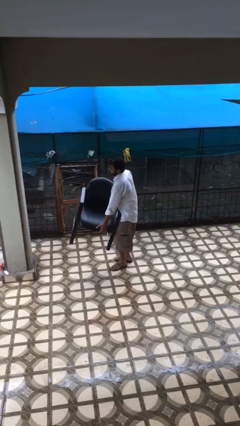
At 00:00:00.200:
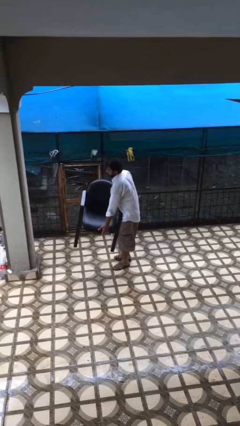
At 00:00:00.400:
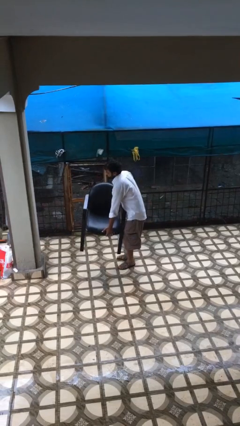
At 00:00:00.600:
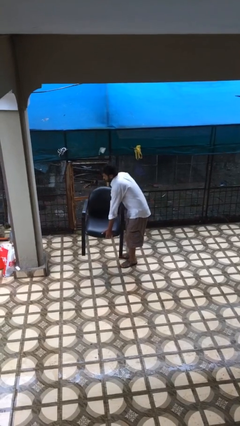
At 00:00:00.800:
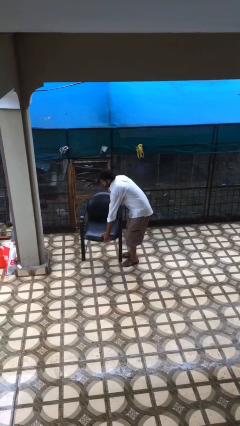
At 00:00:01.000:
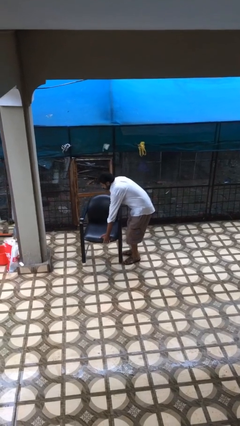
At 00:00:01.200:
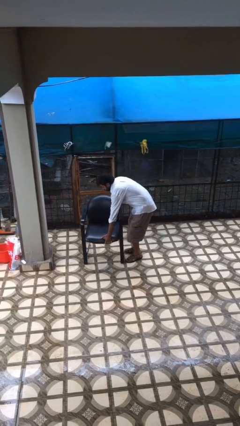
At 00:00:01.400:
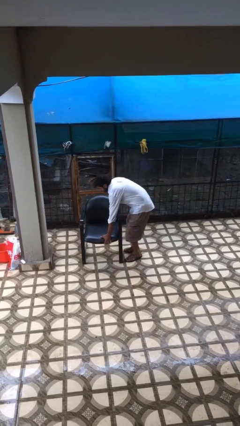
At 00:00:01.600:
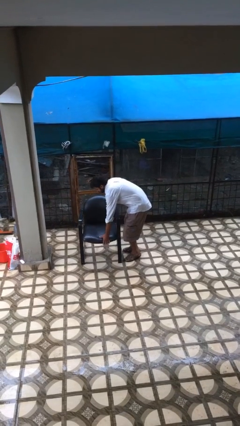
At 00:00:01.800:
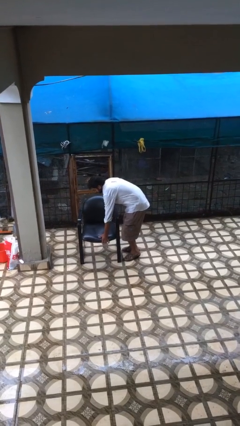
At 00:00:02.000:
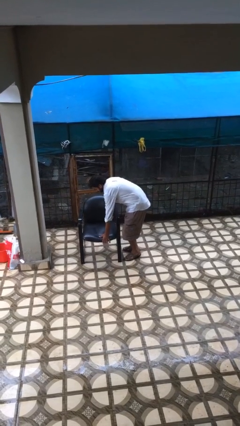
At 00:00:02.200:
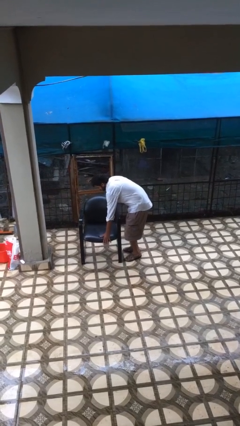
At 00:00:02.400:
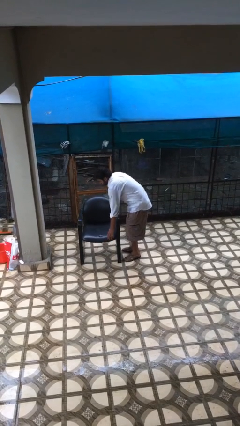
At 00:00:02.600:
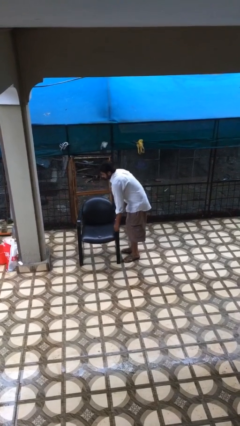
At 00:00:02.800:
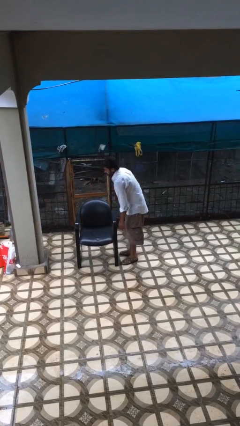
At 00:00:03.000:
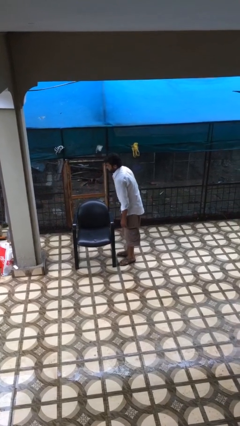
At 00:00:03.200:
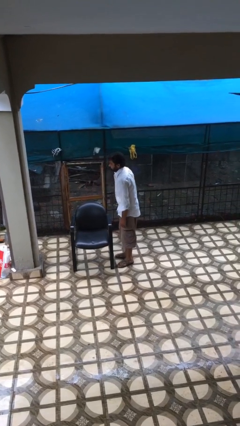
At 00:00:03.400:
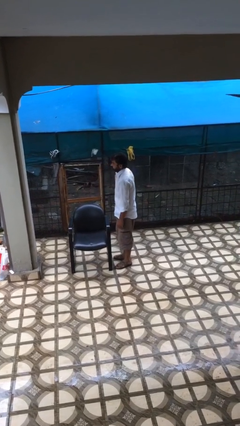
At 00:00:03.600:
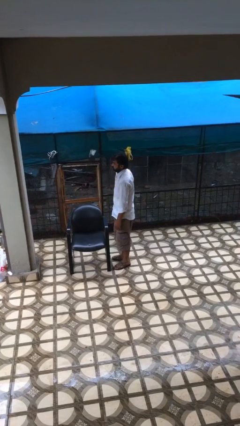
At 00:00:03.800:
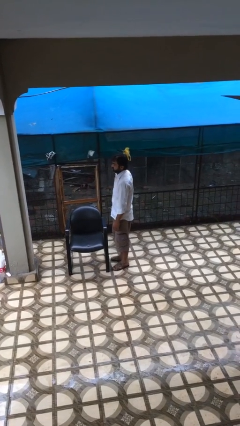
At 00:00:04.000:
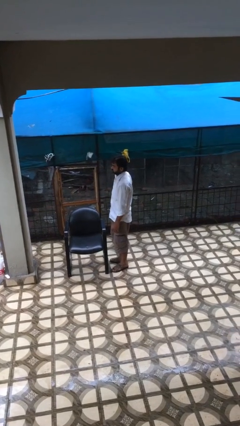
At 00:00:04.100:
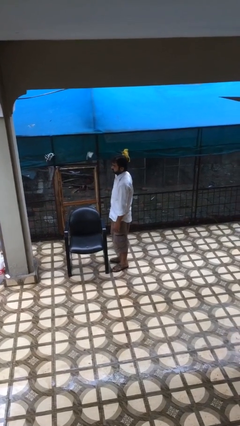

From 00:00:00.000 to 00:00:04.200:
person puts down object on floor

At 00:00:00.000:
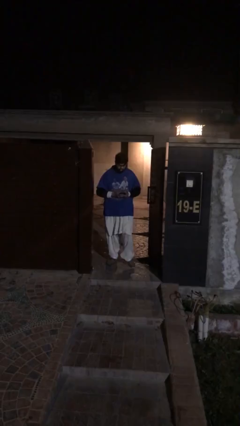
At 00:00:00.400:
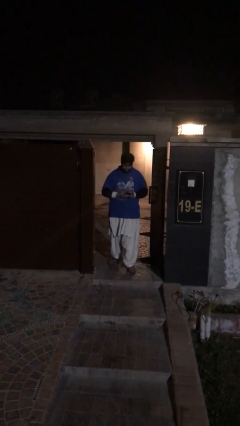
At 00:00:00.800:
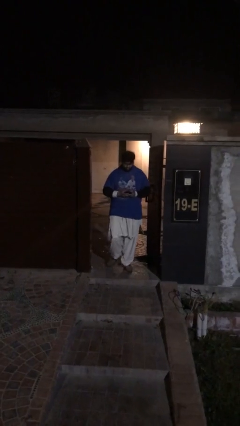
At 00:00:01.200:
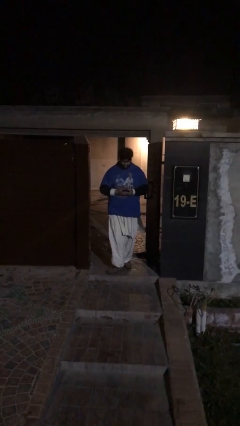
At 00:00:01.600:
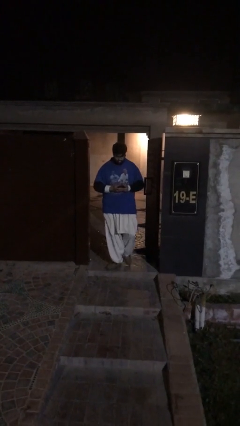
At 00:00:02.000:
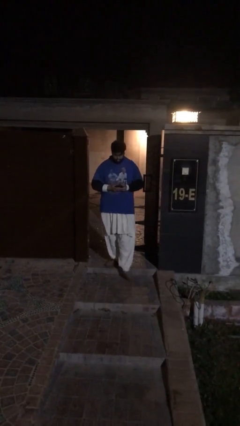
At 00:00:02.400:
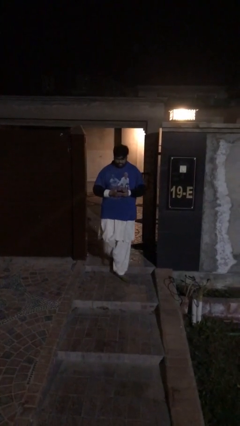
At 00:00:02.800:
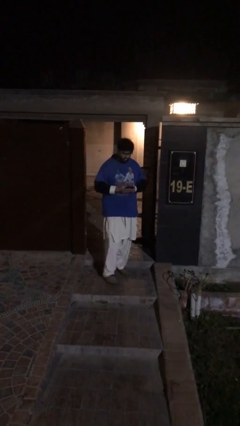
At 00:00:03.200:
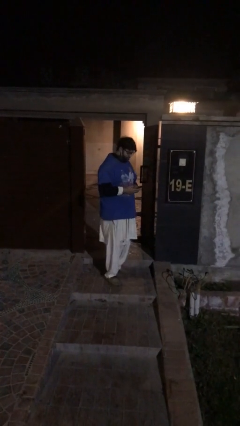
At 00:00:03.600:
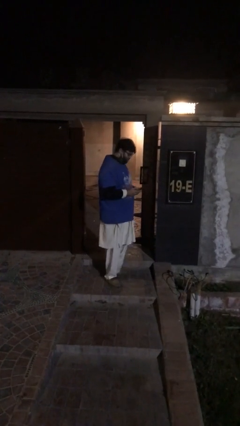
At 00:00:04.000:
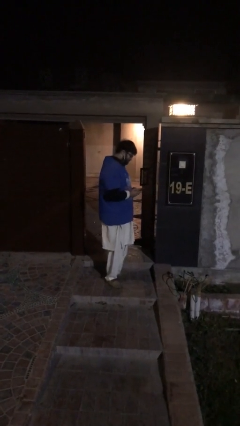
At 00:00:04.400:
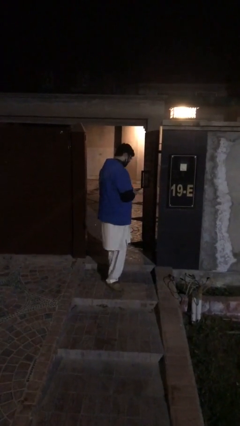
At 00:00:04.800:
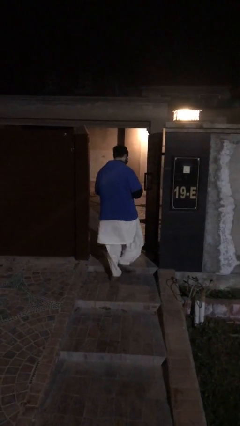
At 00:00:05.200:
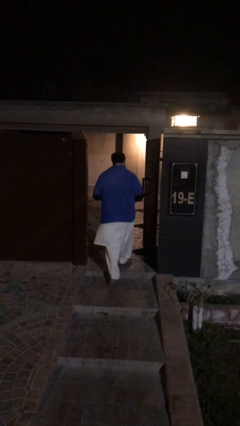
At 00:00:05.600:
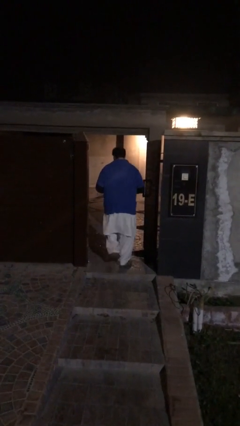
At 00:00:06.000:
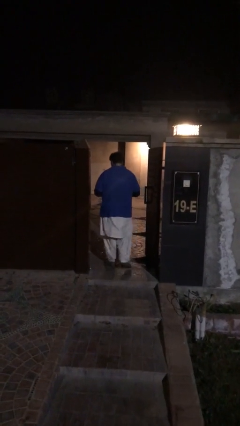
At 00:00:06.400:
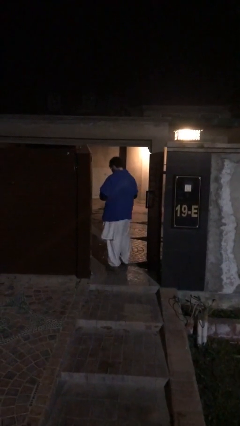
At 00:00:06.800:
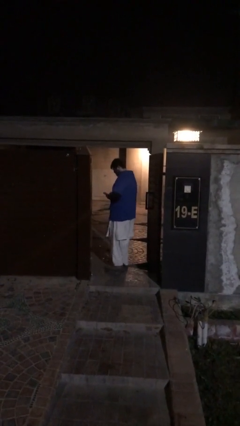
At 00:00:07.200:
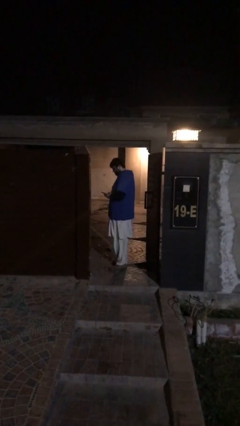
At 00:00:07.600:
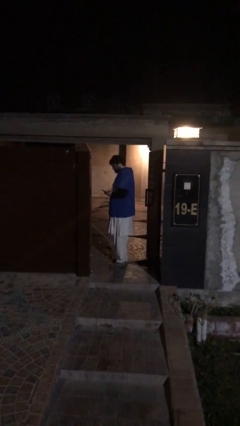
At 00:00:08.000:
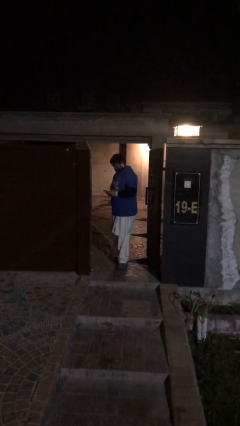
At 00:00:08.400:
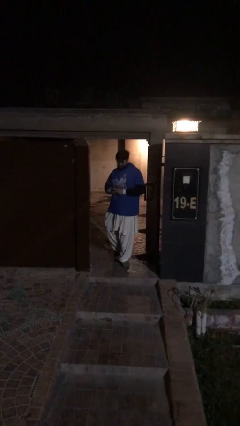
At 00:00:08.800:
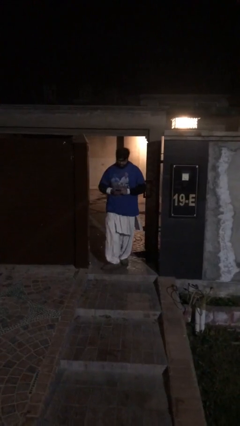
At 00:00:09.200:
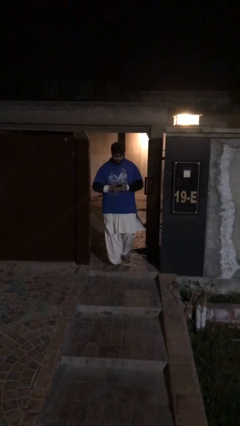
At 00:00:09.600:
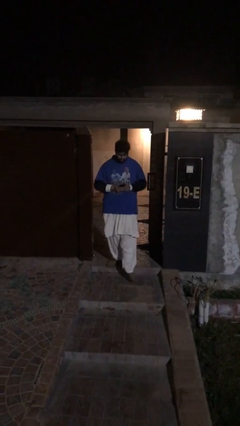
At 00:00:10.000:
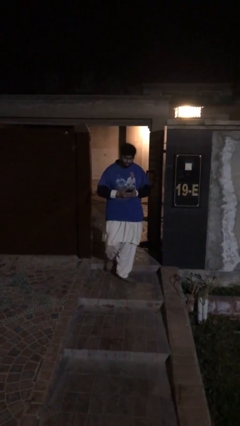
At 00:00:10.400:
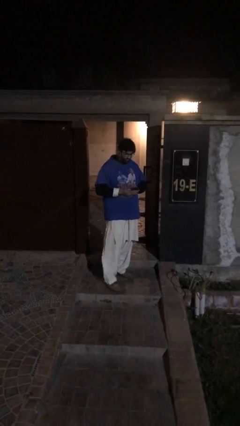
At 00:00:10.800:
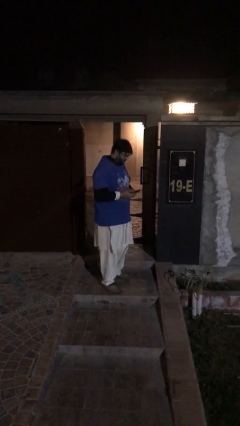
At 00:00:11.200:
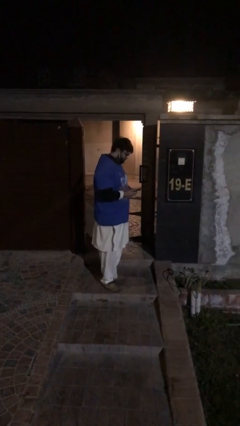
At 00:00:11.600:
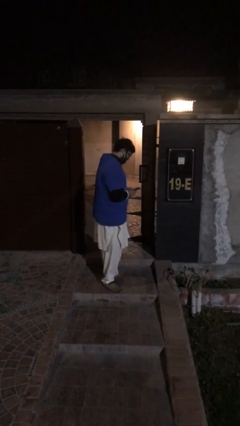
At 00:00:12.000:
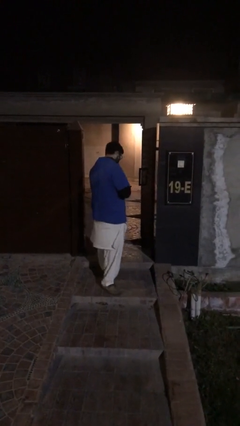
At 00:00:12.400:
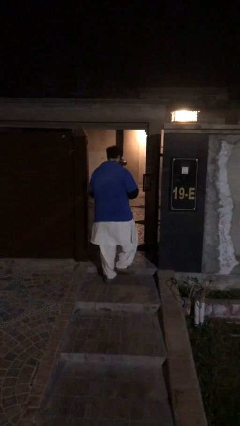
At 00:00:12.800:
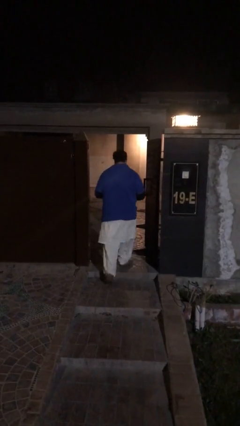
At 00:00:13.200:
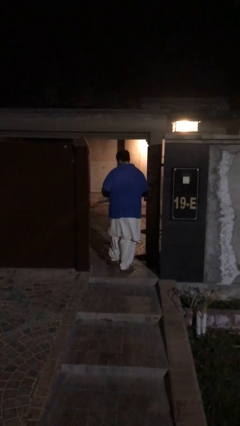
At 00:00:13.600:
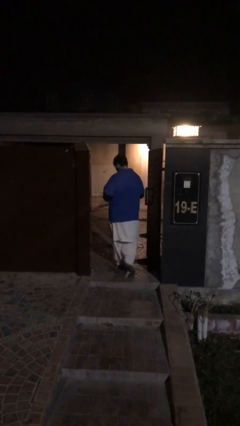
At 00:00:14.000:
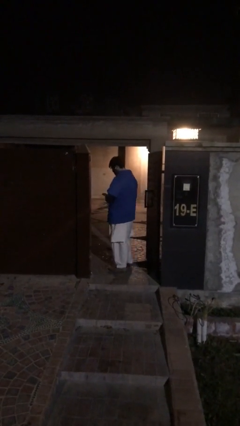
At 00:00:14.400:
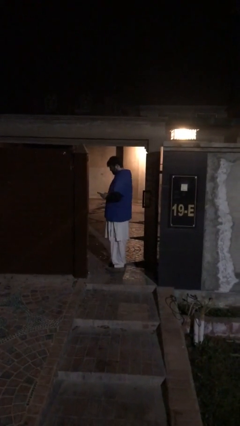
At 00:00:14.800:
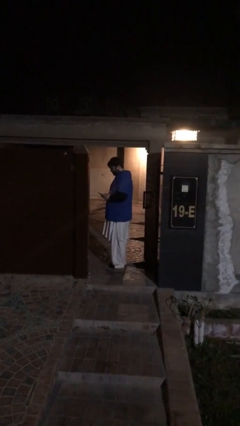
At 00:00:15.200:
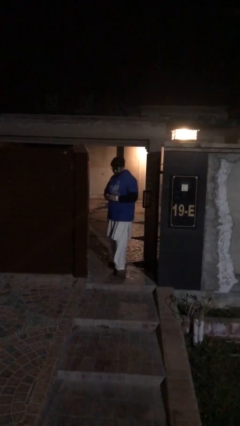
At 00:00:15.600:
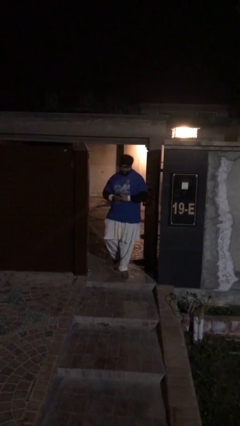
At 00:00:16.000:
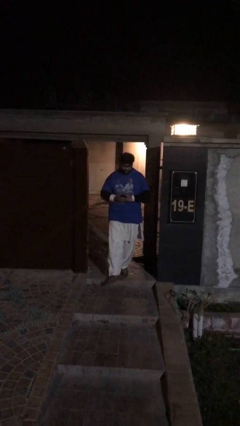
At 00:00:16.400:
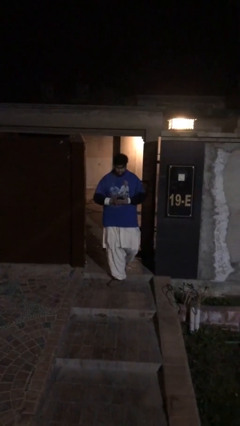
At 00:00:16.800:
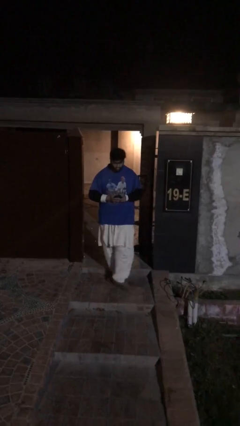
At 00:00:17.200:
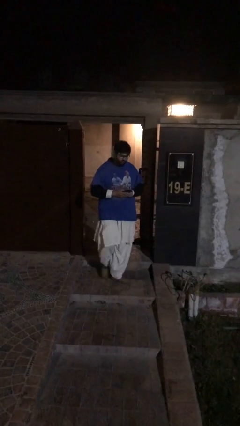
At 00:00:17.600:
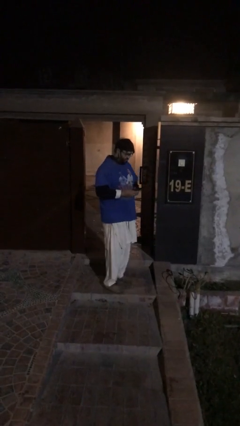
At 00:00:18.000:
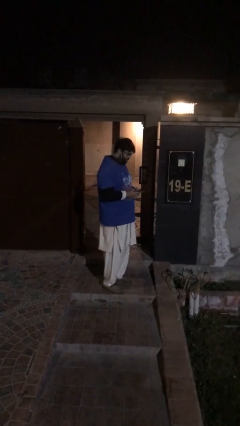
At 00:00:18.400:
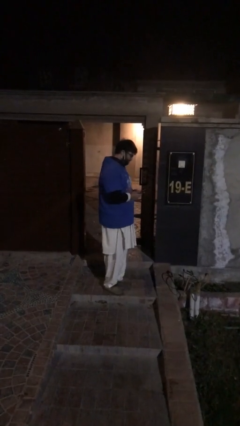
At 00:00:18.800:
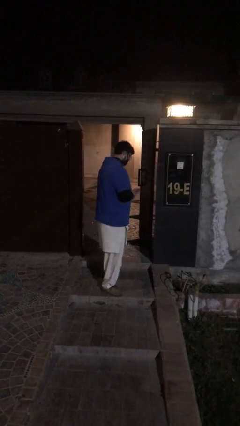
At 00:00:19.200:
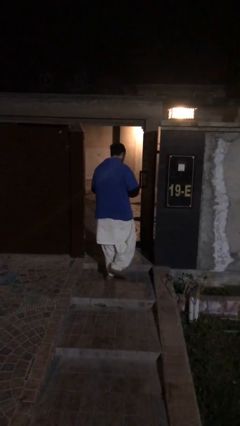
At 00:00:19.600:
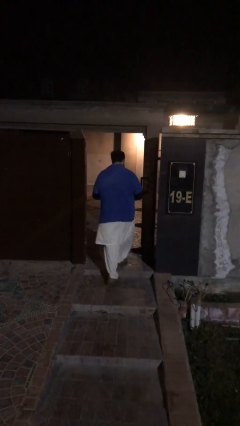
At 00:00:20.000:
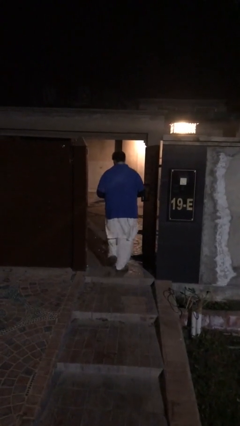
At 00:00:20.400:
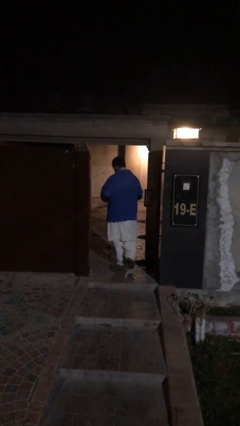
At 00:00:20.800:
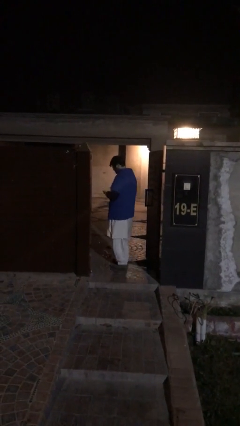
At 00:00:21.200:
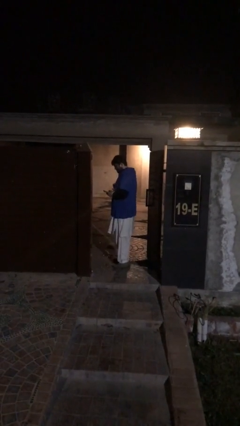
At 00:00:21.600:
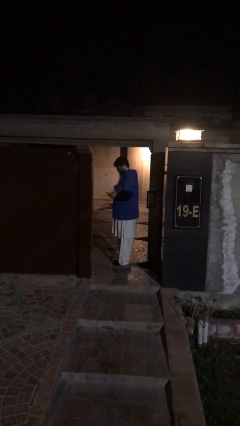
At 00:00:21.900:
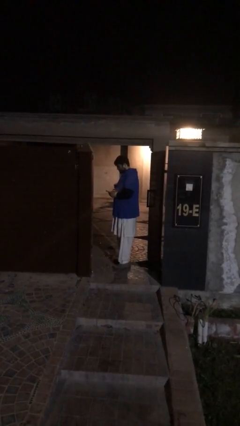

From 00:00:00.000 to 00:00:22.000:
person texts on phone

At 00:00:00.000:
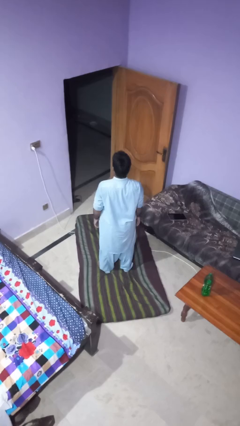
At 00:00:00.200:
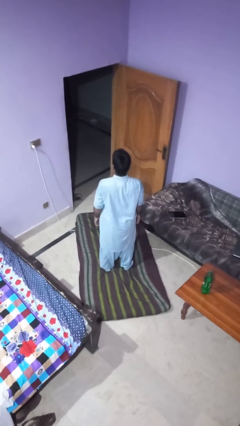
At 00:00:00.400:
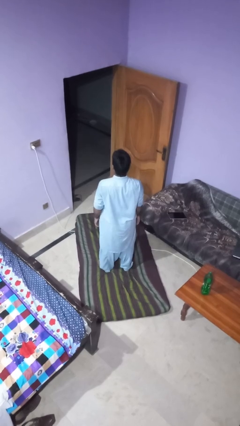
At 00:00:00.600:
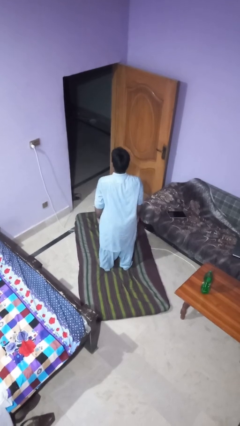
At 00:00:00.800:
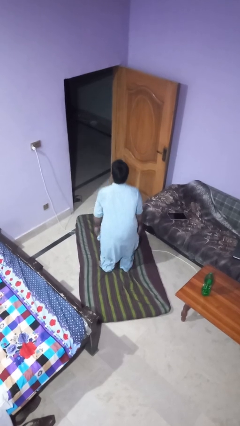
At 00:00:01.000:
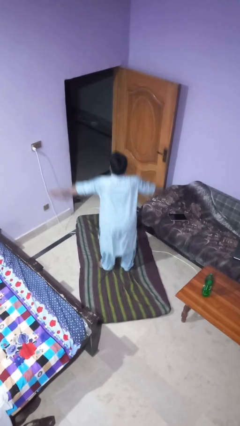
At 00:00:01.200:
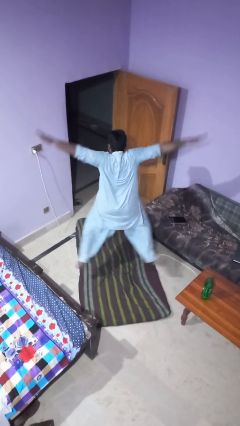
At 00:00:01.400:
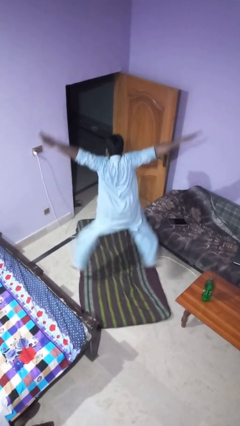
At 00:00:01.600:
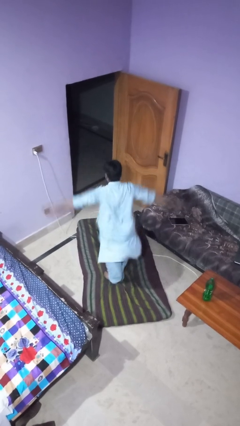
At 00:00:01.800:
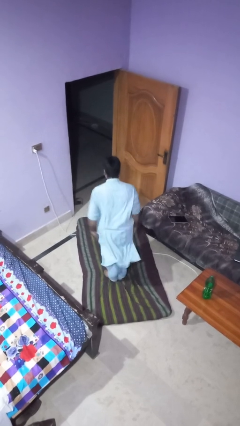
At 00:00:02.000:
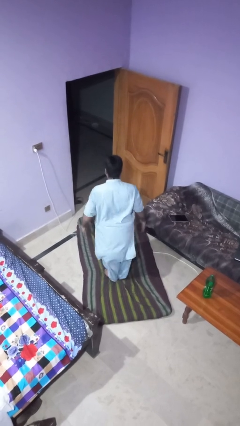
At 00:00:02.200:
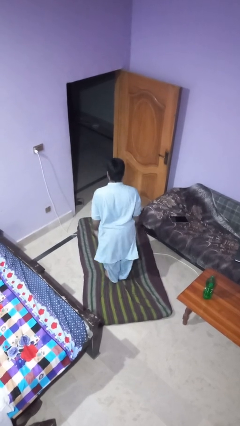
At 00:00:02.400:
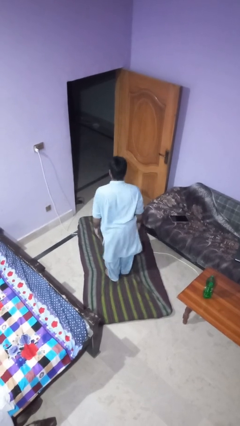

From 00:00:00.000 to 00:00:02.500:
person exercises with jumping jacks
